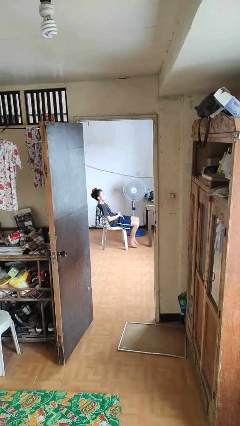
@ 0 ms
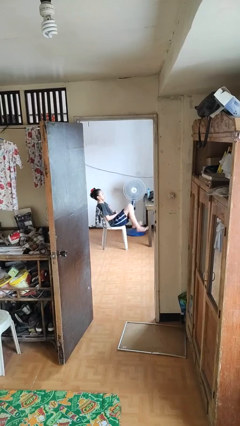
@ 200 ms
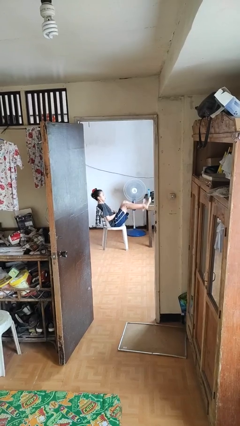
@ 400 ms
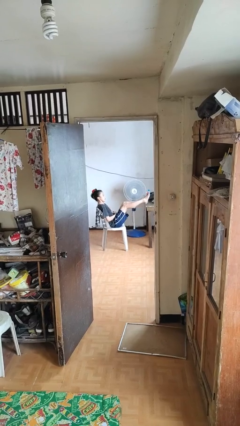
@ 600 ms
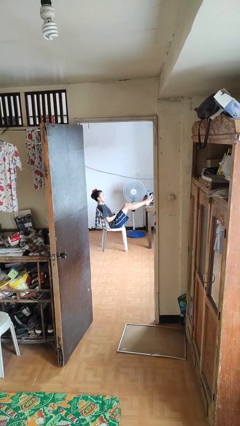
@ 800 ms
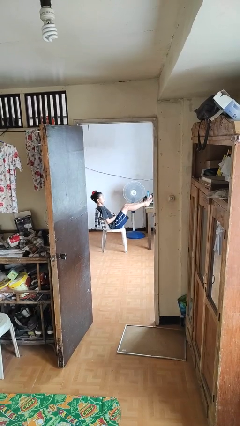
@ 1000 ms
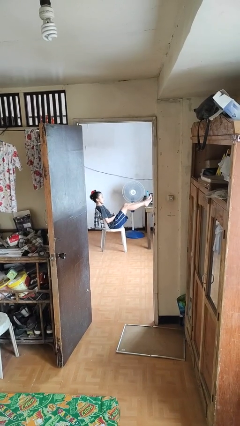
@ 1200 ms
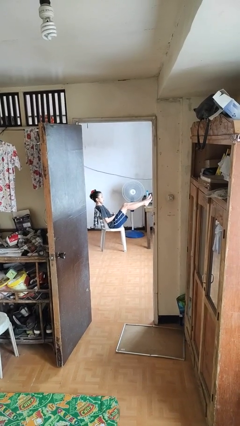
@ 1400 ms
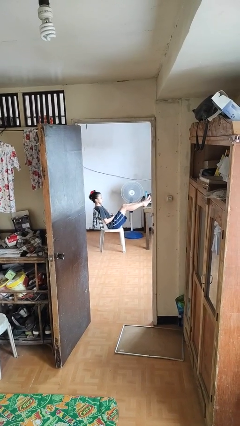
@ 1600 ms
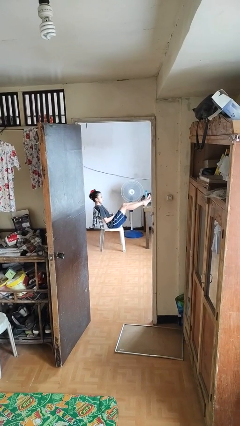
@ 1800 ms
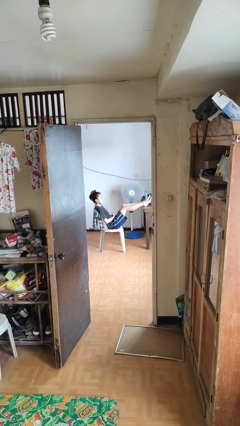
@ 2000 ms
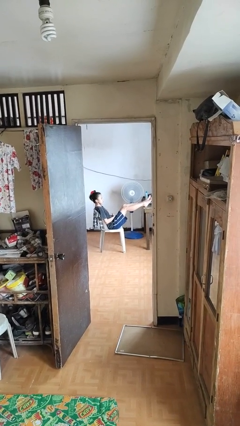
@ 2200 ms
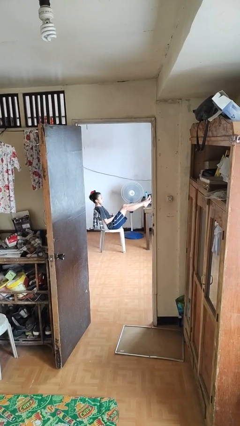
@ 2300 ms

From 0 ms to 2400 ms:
person puts feet up

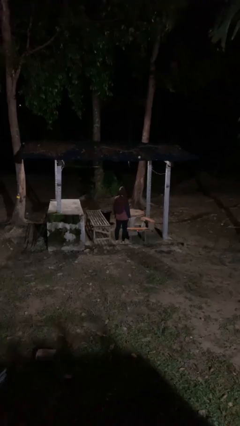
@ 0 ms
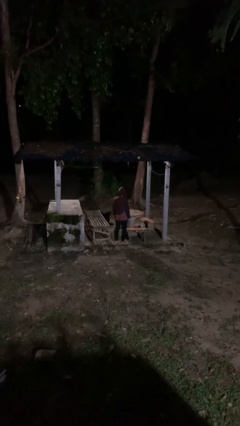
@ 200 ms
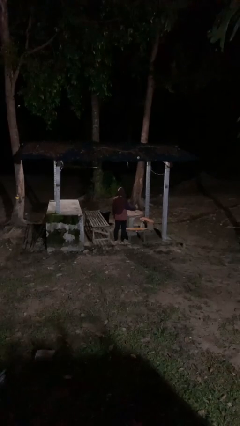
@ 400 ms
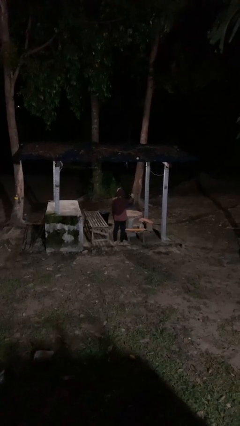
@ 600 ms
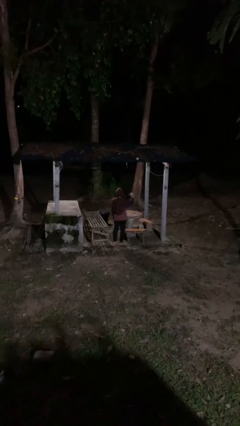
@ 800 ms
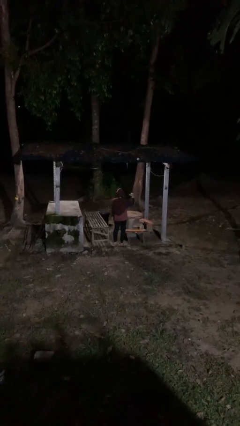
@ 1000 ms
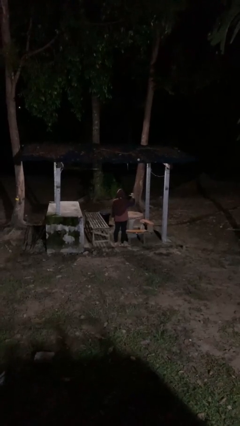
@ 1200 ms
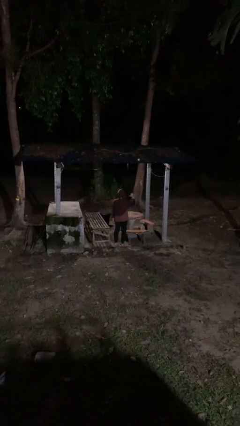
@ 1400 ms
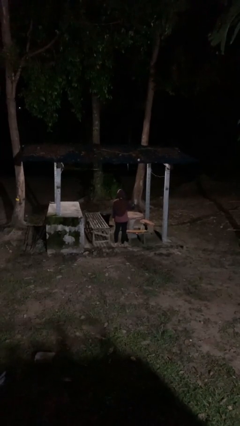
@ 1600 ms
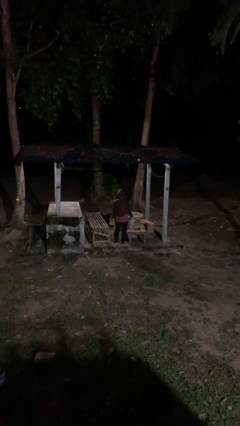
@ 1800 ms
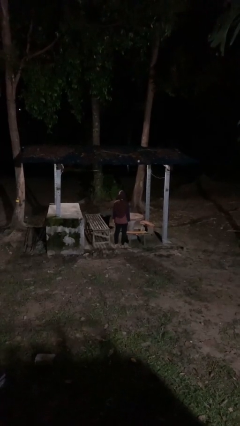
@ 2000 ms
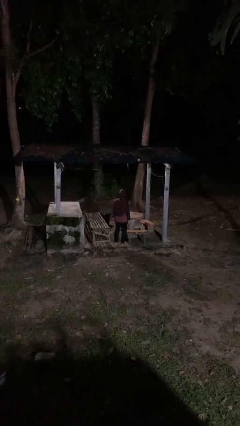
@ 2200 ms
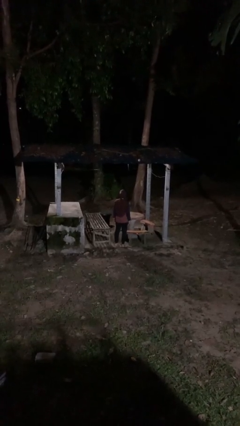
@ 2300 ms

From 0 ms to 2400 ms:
person gestures behind me

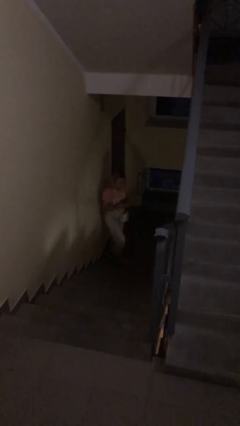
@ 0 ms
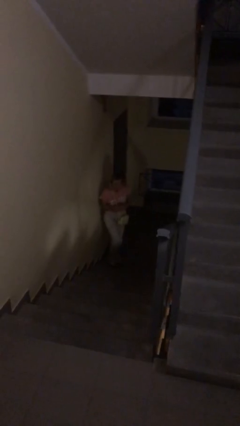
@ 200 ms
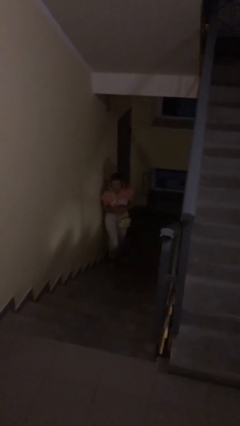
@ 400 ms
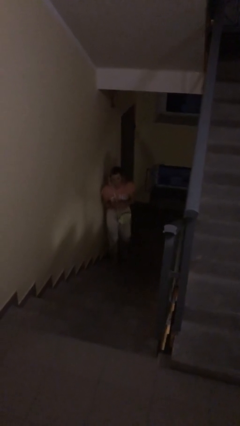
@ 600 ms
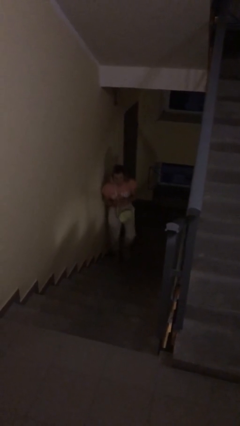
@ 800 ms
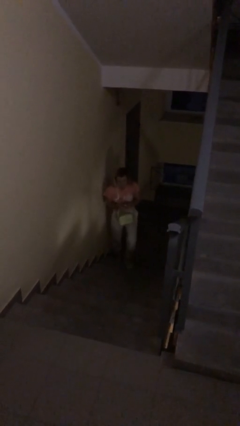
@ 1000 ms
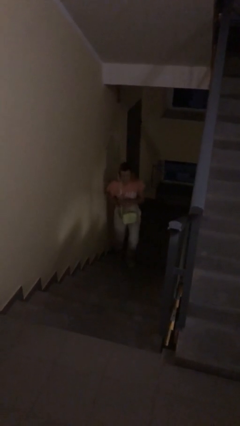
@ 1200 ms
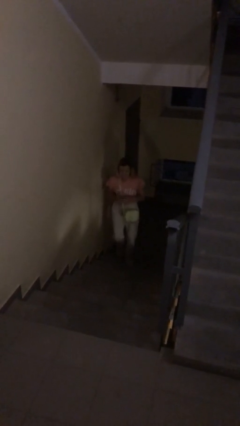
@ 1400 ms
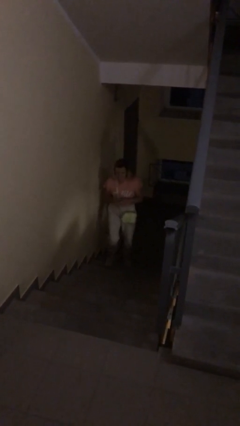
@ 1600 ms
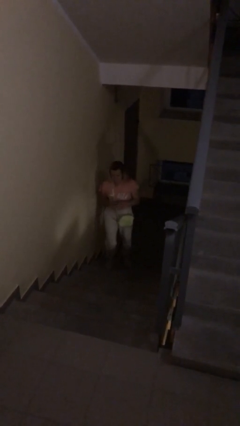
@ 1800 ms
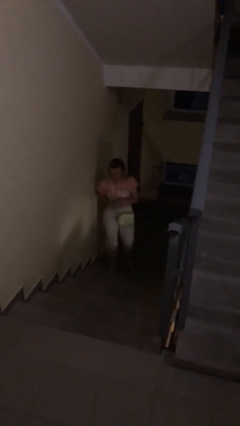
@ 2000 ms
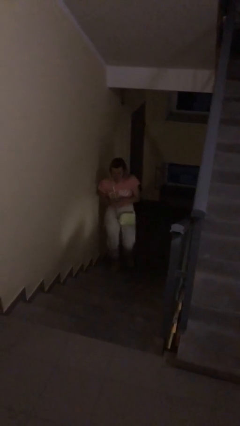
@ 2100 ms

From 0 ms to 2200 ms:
person climbs up stairs

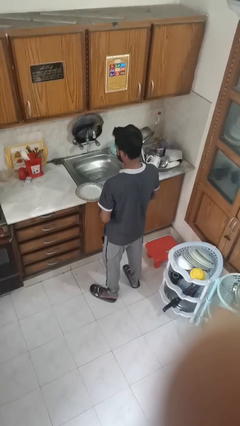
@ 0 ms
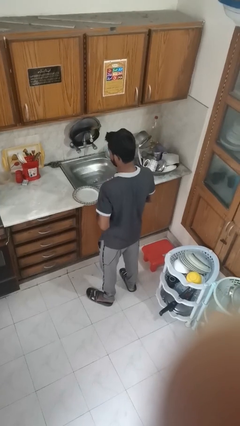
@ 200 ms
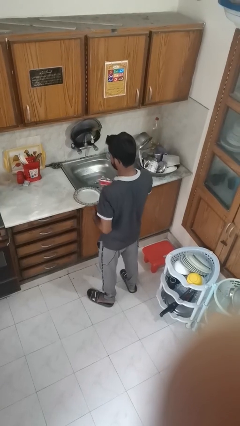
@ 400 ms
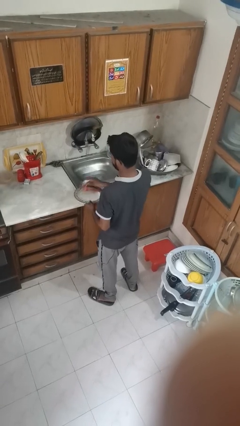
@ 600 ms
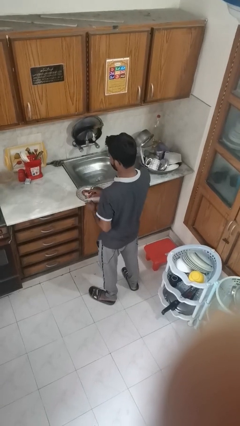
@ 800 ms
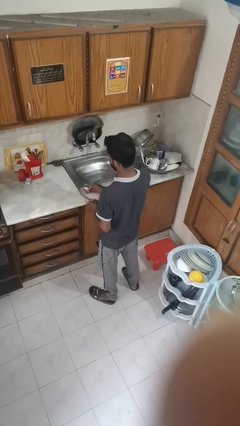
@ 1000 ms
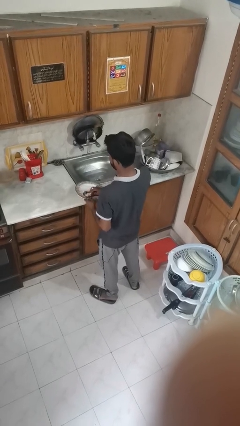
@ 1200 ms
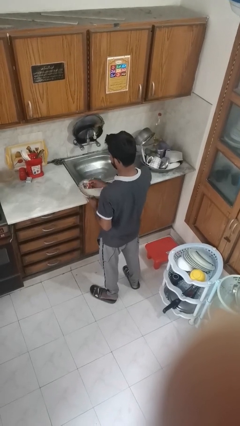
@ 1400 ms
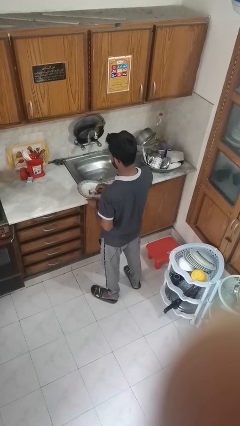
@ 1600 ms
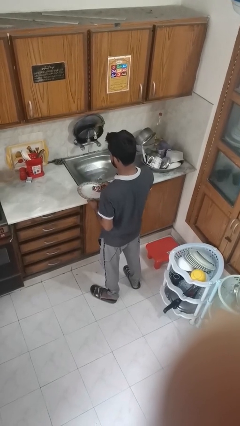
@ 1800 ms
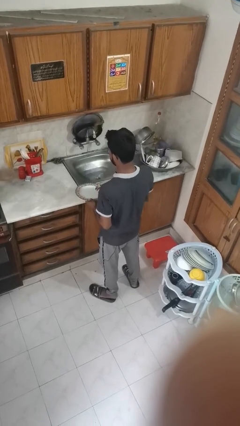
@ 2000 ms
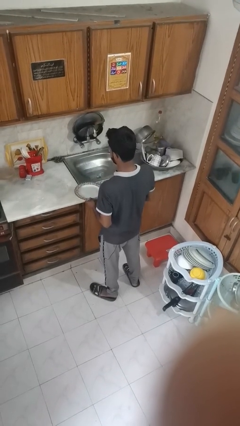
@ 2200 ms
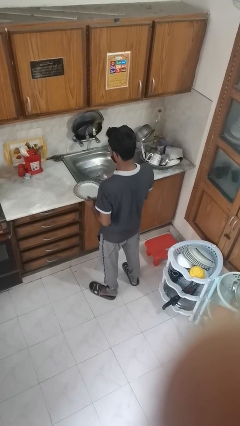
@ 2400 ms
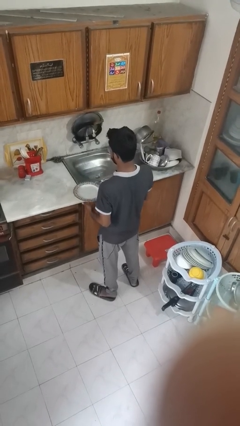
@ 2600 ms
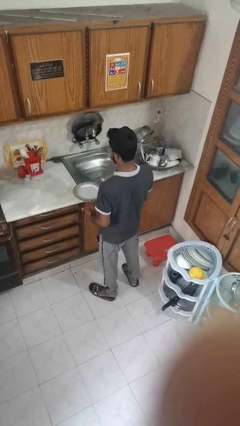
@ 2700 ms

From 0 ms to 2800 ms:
person dries dish

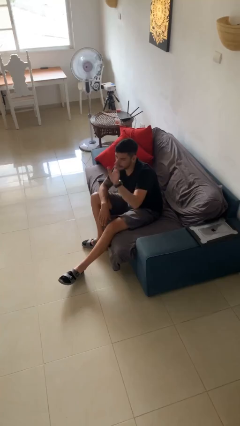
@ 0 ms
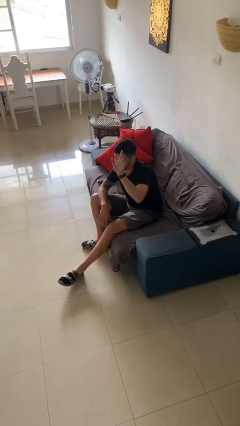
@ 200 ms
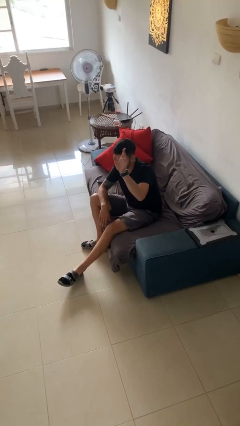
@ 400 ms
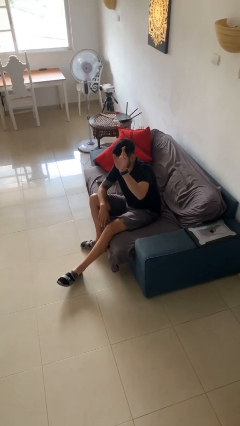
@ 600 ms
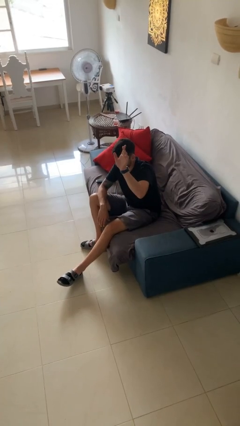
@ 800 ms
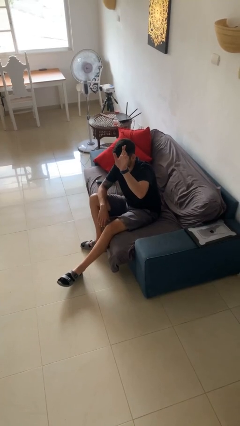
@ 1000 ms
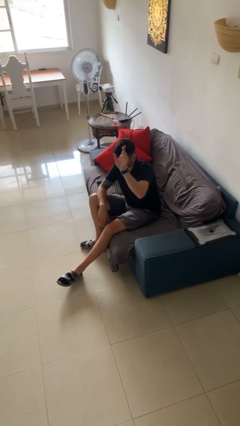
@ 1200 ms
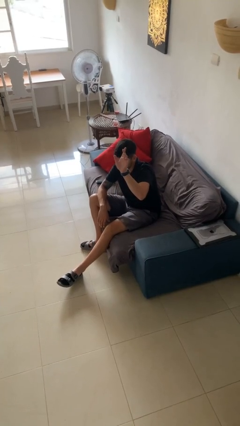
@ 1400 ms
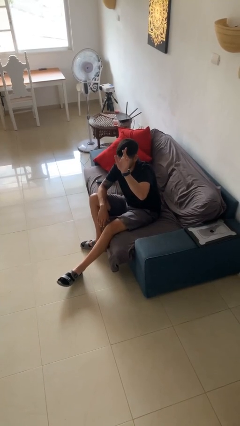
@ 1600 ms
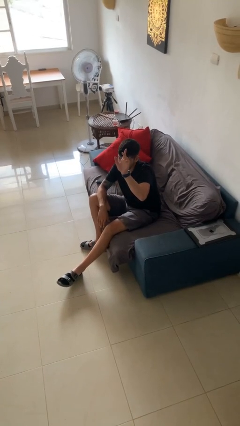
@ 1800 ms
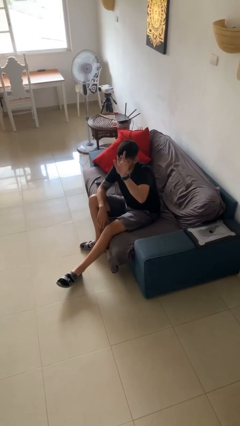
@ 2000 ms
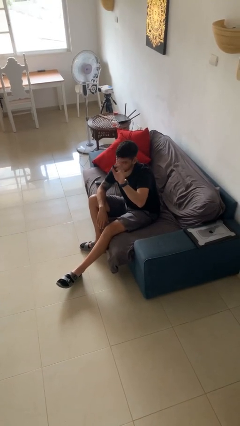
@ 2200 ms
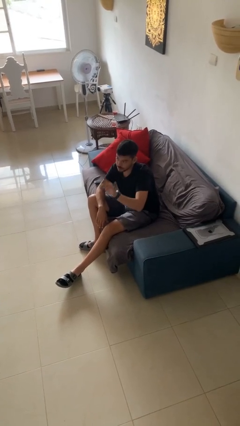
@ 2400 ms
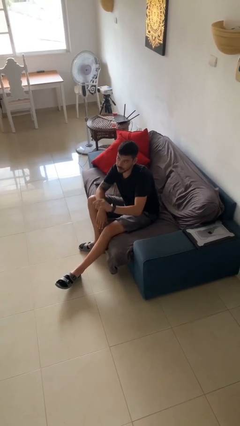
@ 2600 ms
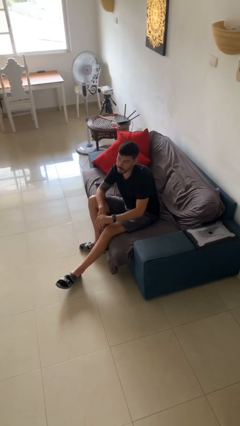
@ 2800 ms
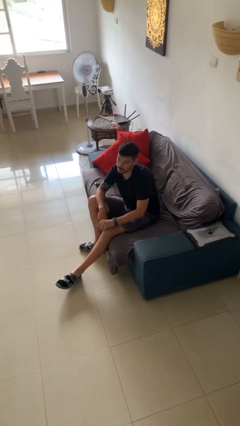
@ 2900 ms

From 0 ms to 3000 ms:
person gestures raise hand

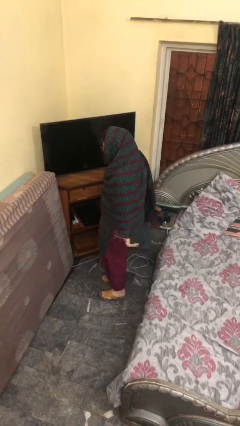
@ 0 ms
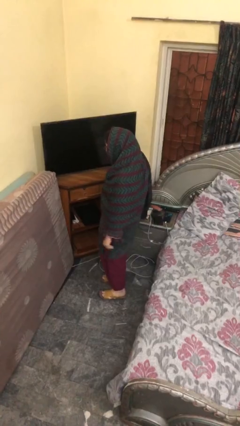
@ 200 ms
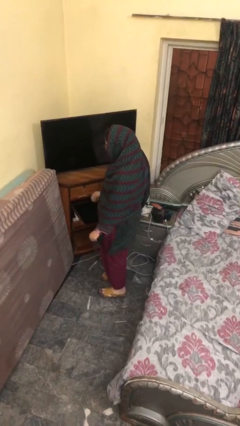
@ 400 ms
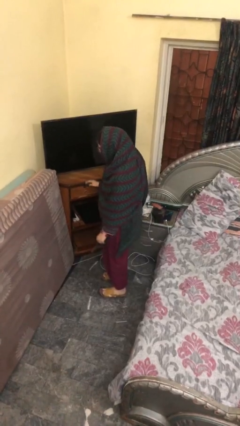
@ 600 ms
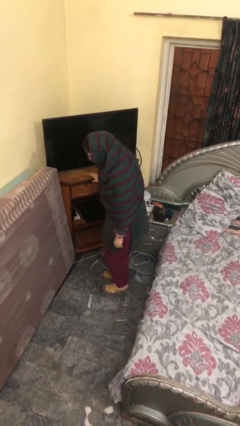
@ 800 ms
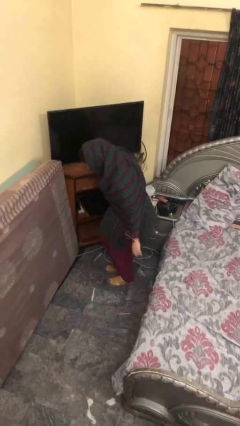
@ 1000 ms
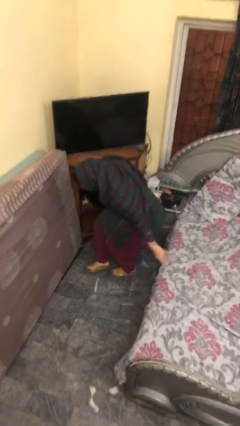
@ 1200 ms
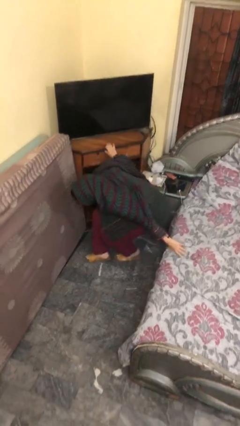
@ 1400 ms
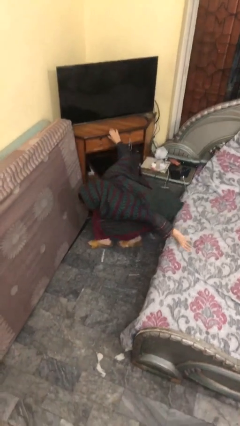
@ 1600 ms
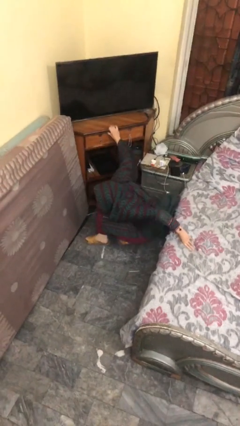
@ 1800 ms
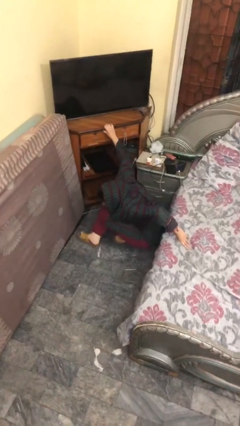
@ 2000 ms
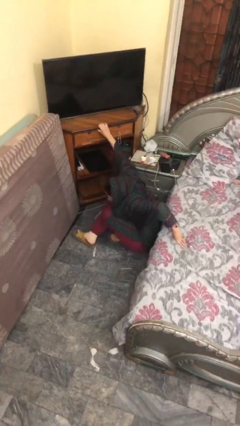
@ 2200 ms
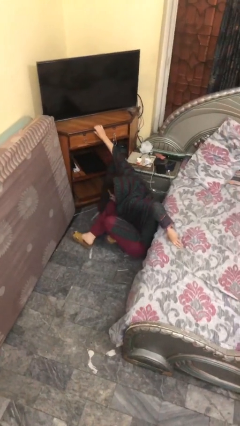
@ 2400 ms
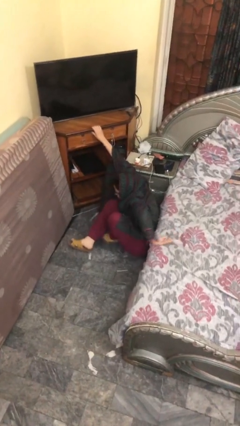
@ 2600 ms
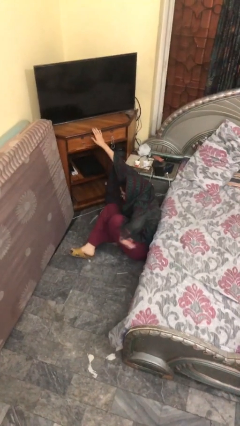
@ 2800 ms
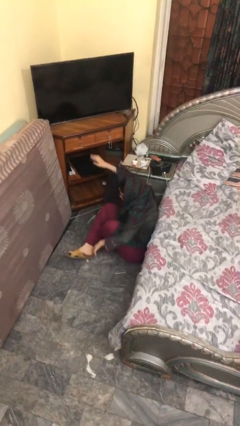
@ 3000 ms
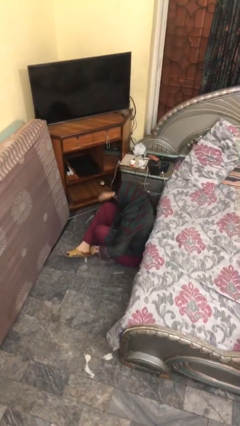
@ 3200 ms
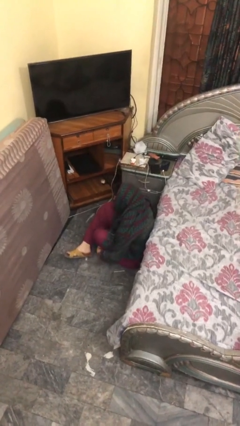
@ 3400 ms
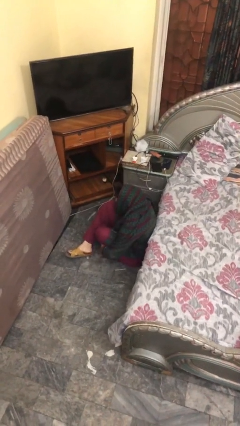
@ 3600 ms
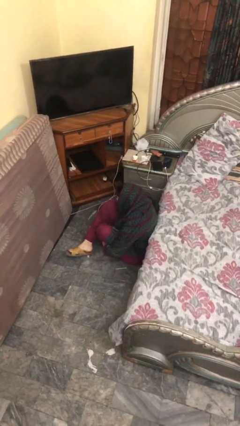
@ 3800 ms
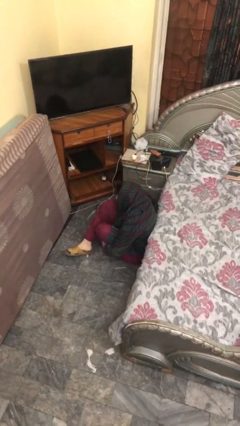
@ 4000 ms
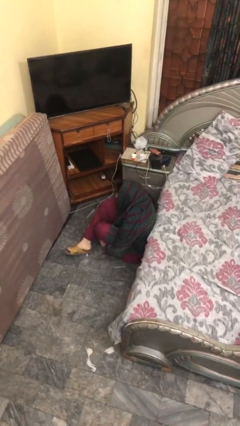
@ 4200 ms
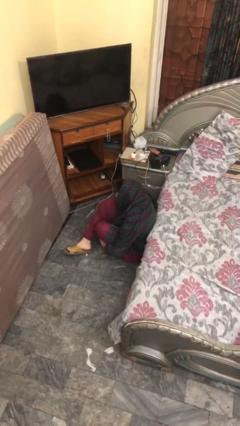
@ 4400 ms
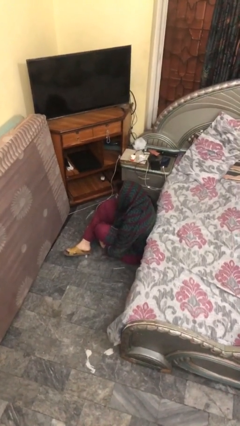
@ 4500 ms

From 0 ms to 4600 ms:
person sits crisscross

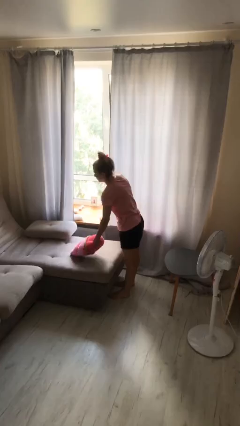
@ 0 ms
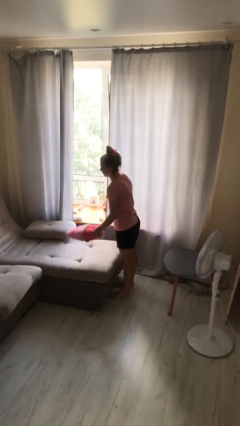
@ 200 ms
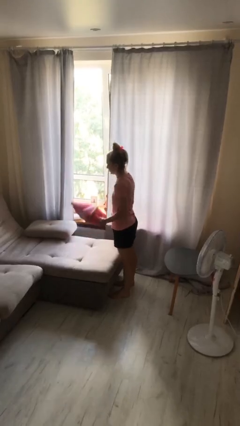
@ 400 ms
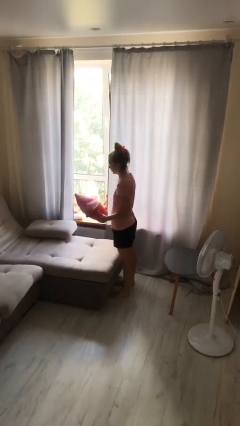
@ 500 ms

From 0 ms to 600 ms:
person picks up object from couch
